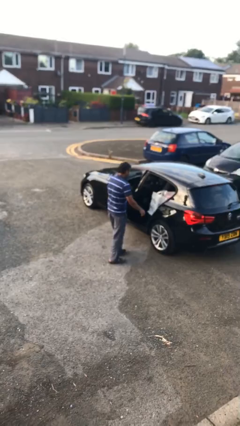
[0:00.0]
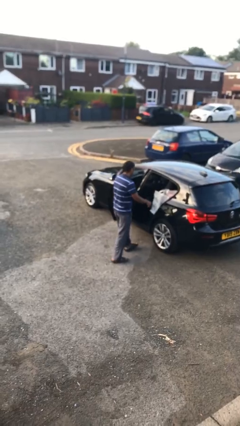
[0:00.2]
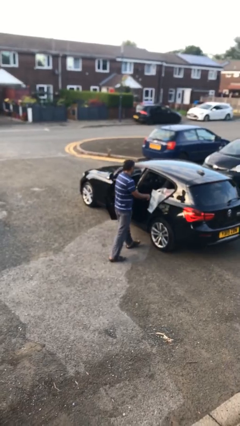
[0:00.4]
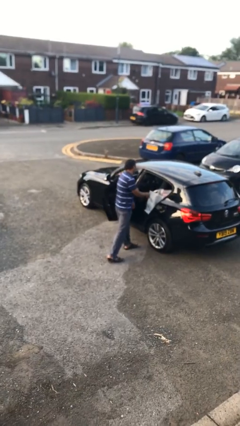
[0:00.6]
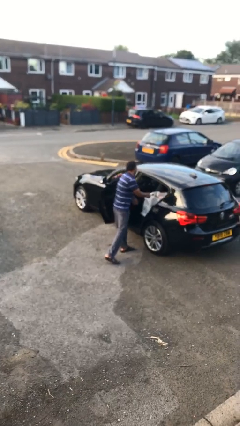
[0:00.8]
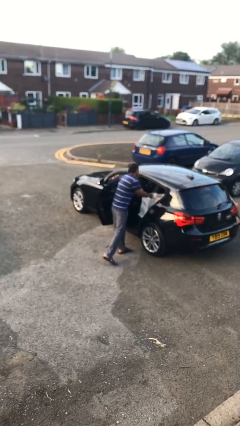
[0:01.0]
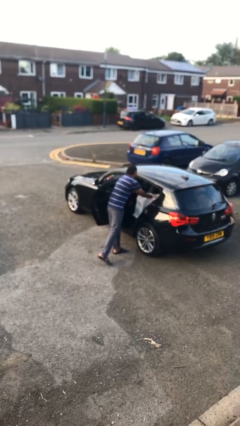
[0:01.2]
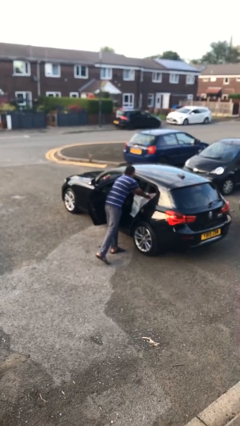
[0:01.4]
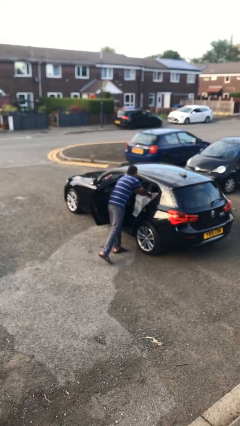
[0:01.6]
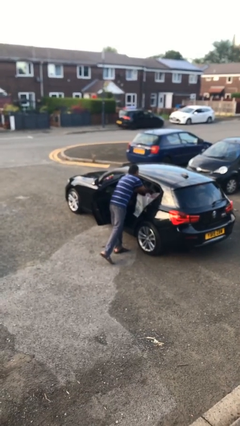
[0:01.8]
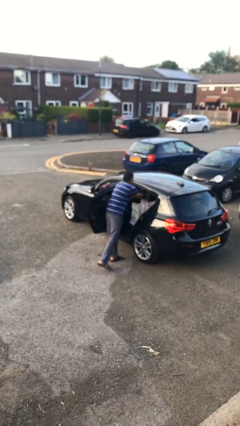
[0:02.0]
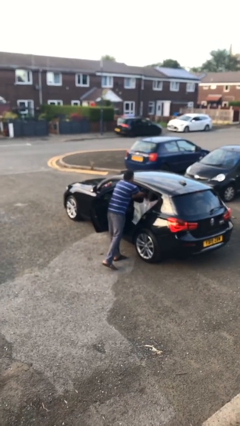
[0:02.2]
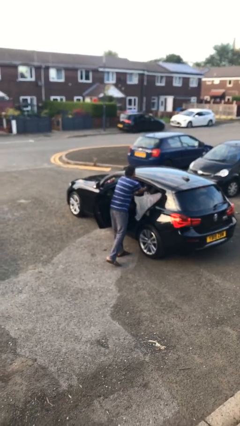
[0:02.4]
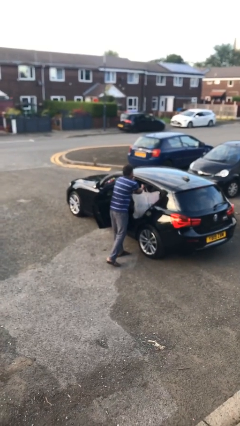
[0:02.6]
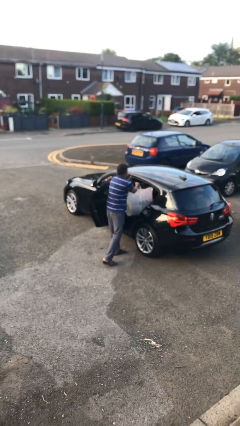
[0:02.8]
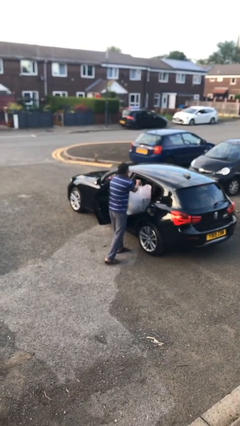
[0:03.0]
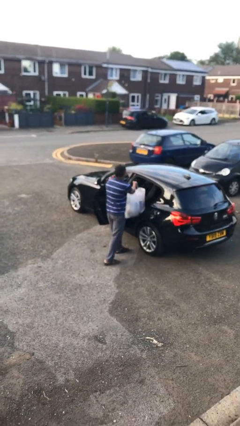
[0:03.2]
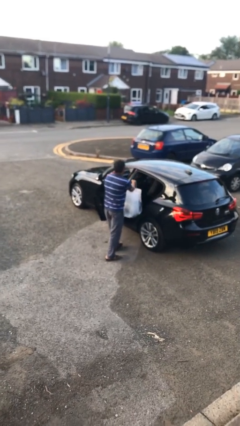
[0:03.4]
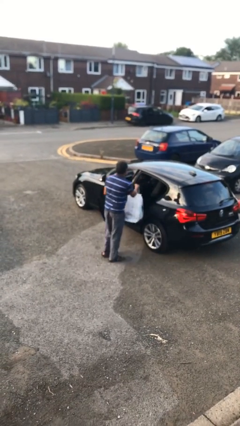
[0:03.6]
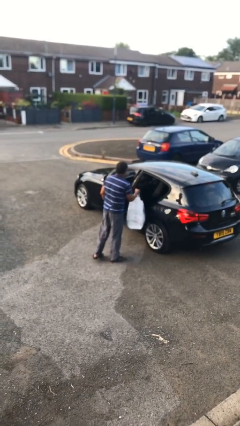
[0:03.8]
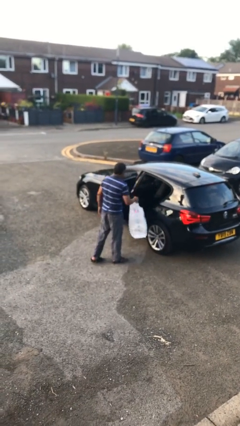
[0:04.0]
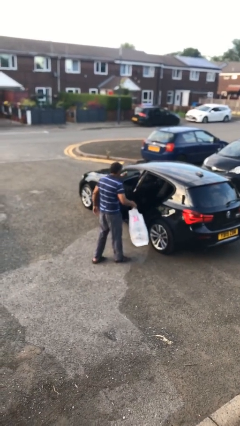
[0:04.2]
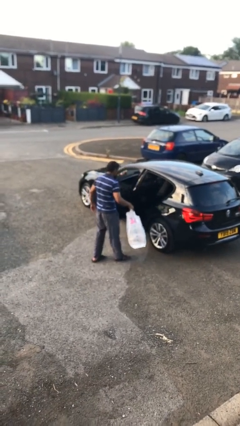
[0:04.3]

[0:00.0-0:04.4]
person unloads car

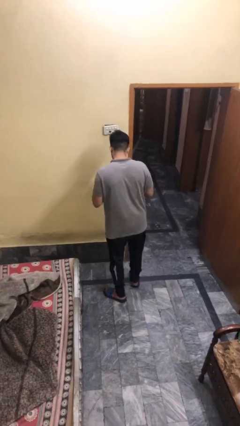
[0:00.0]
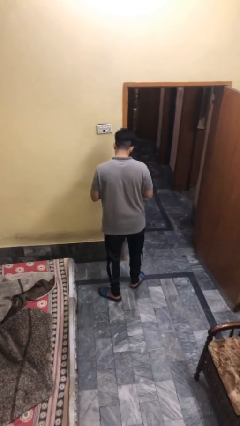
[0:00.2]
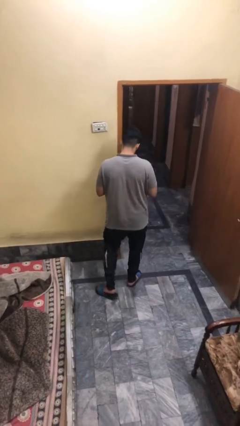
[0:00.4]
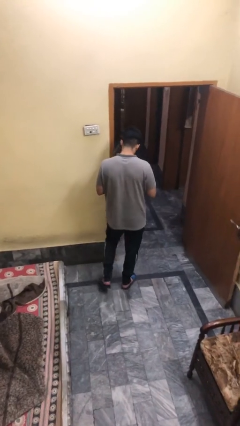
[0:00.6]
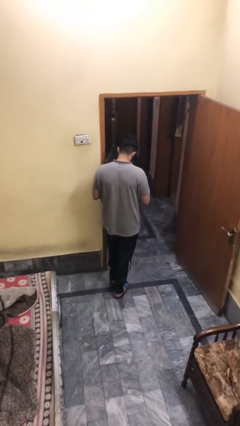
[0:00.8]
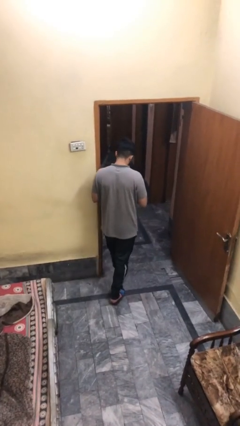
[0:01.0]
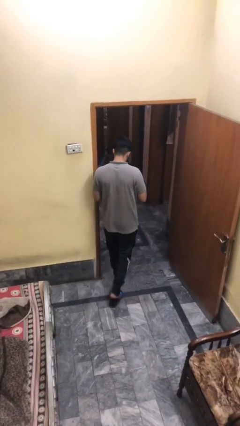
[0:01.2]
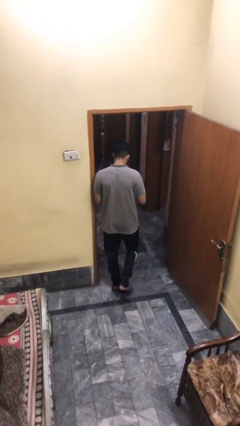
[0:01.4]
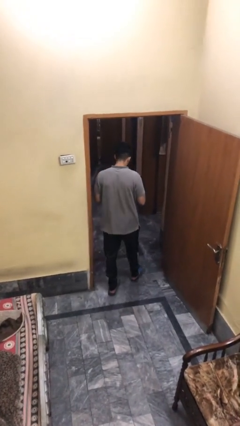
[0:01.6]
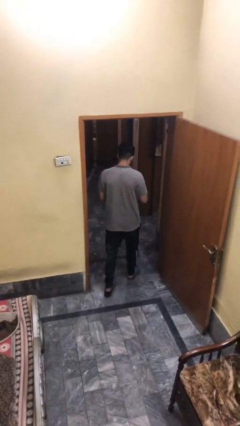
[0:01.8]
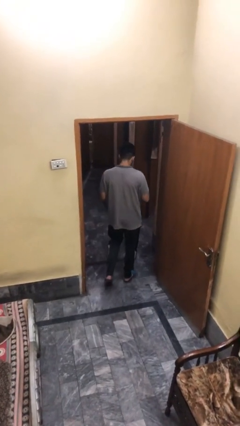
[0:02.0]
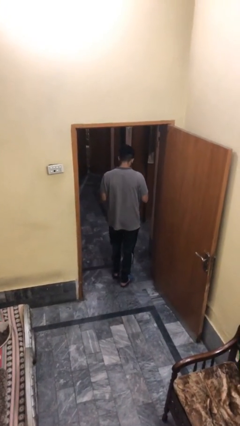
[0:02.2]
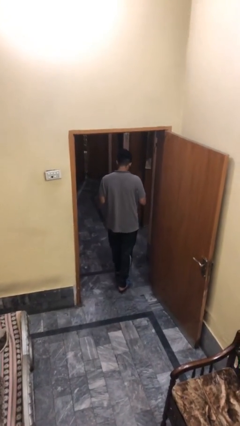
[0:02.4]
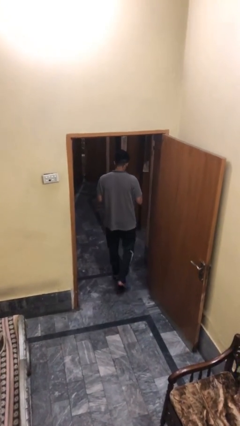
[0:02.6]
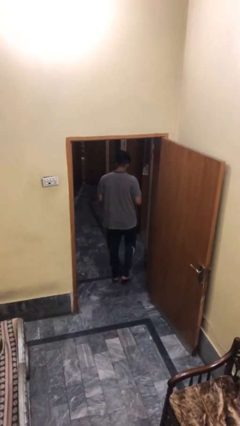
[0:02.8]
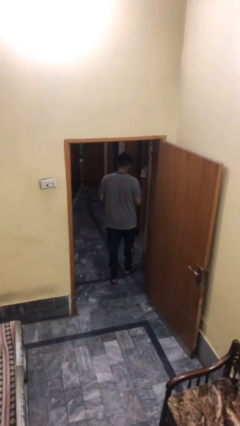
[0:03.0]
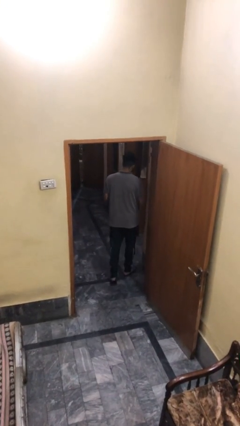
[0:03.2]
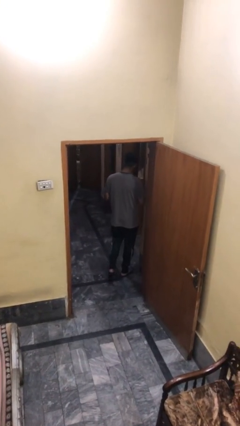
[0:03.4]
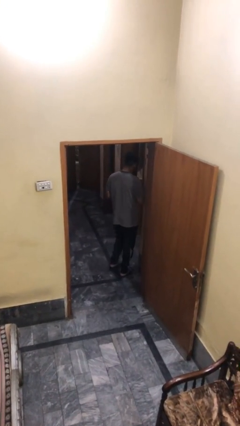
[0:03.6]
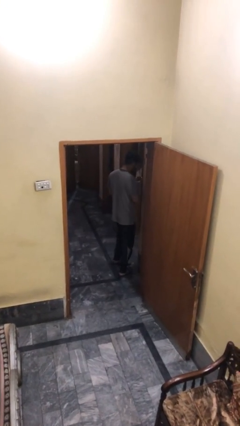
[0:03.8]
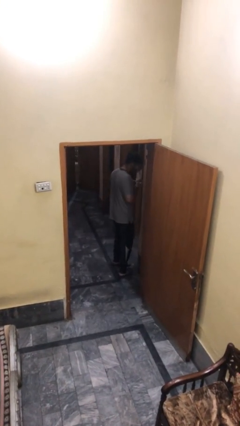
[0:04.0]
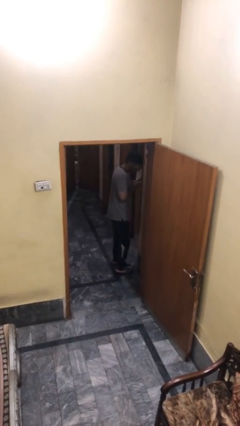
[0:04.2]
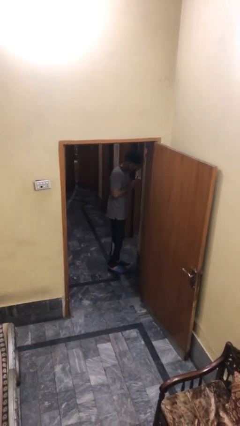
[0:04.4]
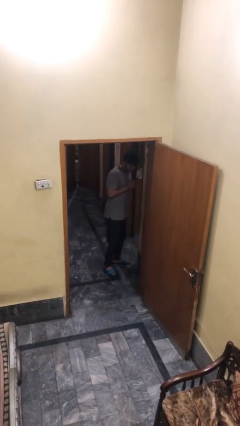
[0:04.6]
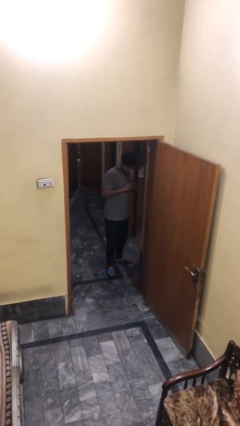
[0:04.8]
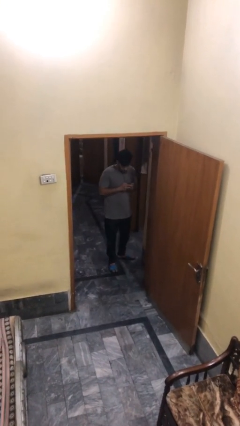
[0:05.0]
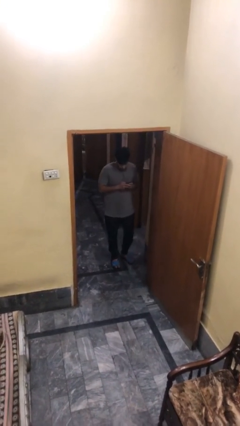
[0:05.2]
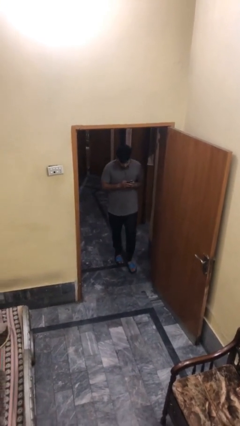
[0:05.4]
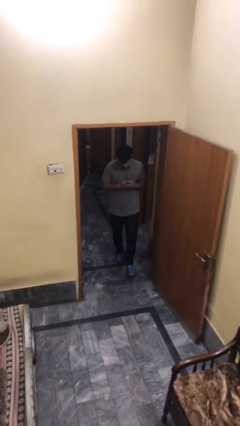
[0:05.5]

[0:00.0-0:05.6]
person exits scene through structure

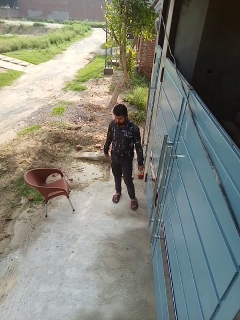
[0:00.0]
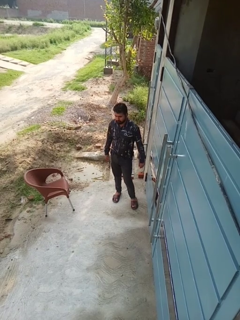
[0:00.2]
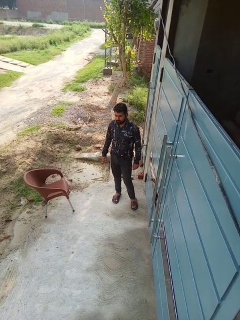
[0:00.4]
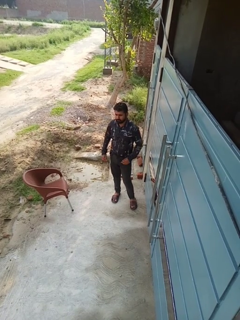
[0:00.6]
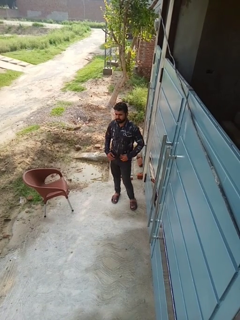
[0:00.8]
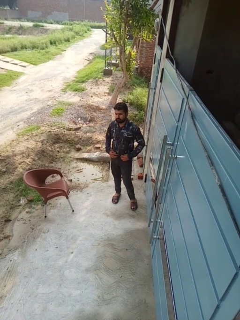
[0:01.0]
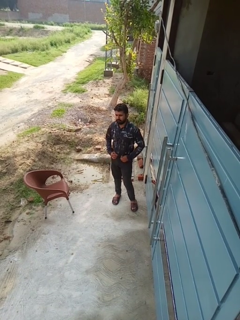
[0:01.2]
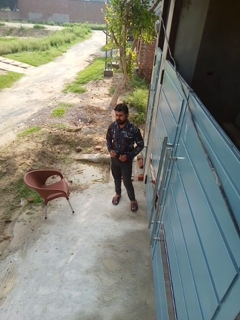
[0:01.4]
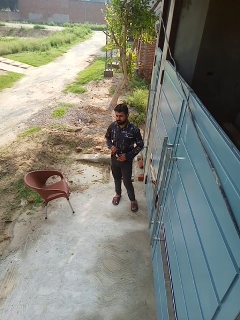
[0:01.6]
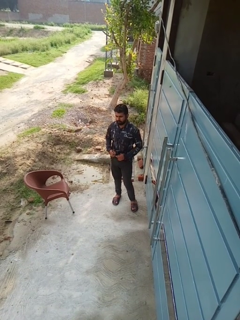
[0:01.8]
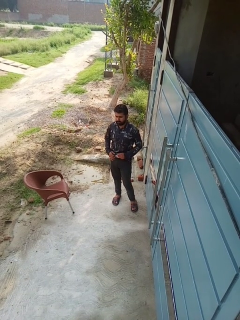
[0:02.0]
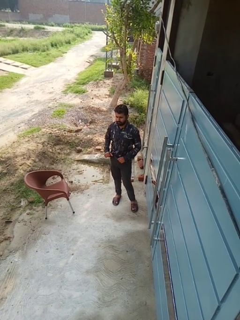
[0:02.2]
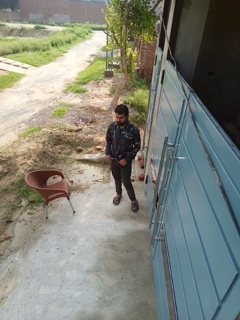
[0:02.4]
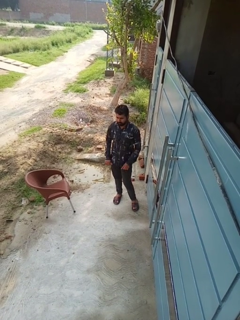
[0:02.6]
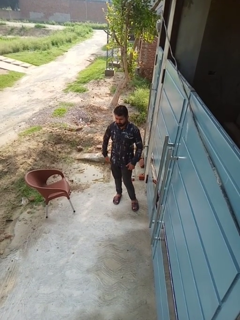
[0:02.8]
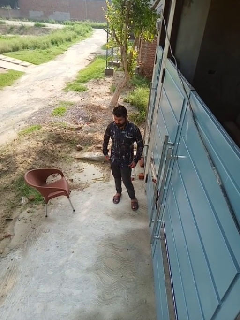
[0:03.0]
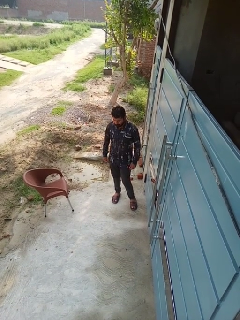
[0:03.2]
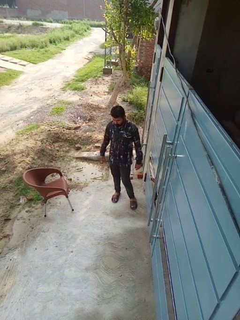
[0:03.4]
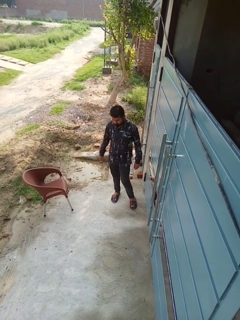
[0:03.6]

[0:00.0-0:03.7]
person untucks shirt

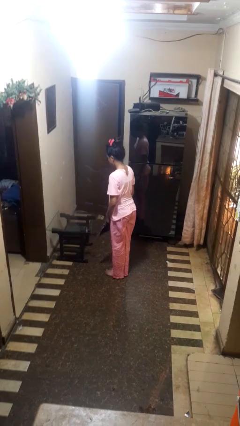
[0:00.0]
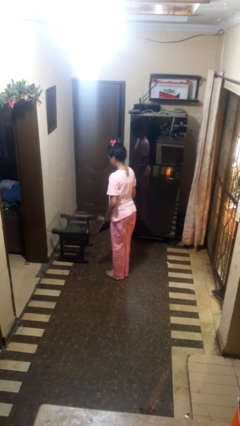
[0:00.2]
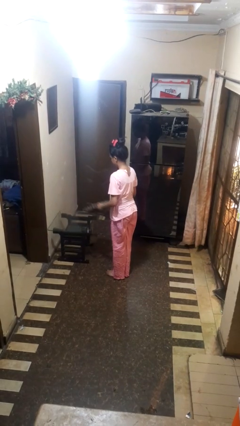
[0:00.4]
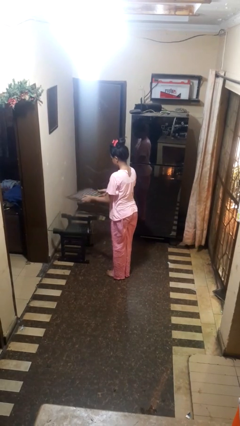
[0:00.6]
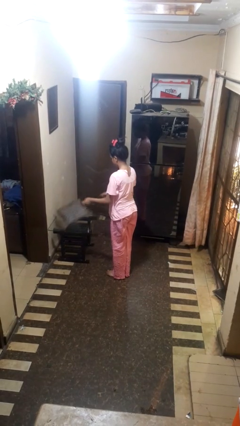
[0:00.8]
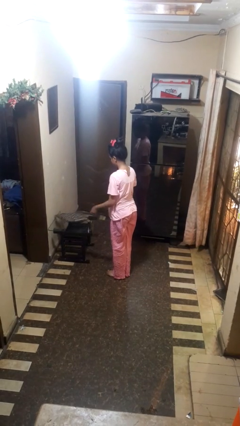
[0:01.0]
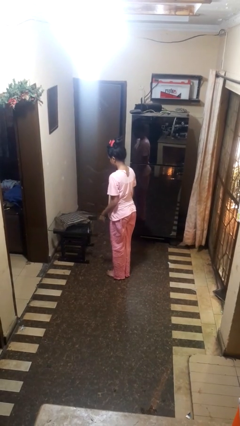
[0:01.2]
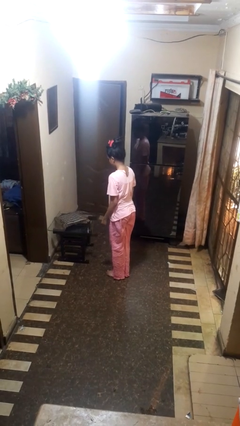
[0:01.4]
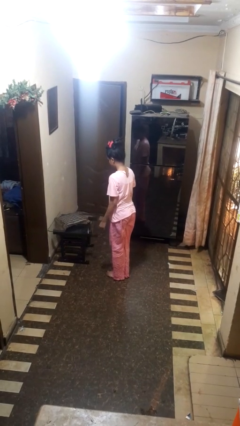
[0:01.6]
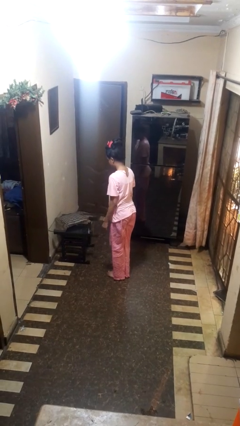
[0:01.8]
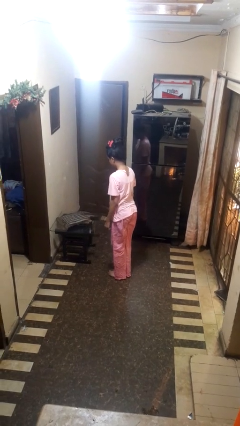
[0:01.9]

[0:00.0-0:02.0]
person throws object on table

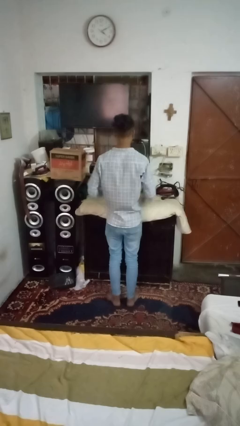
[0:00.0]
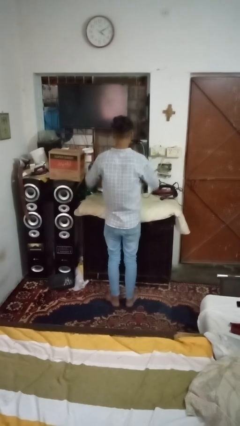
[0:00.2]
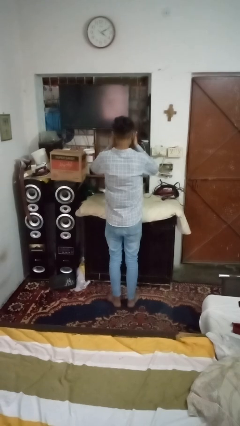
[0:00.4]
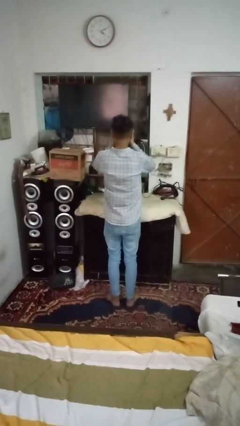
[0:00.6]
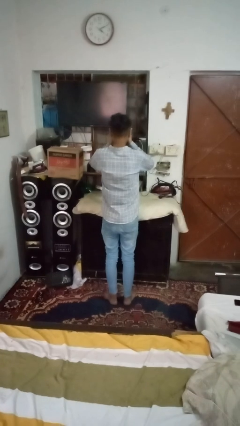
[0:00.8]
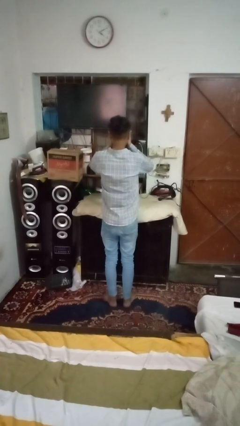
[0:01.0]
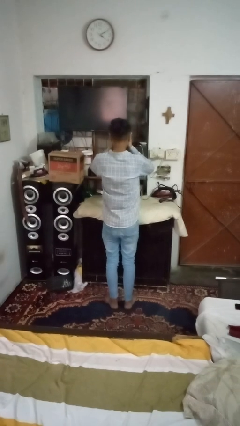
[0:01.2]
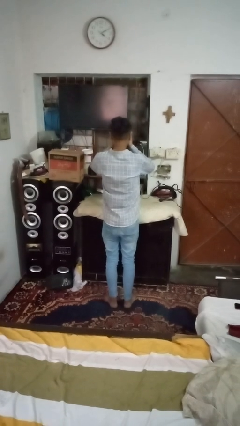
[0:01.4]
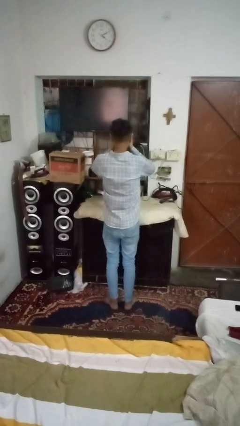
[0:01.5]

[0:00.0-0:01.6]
person covers face with hands

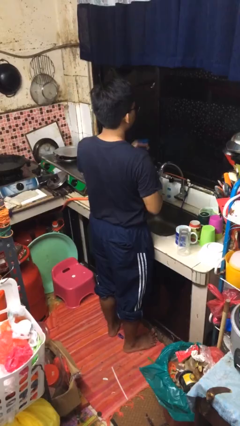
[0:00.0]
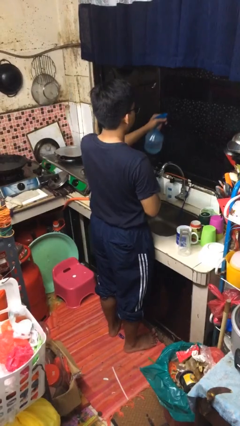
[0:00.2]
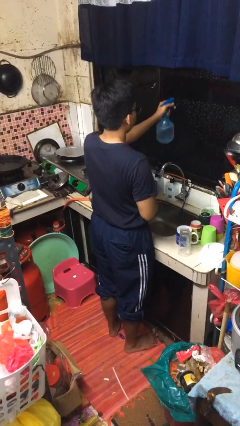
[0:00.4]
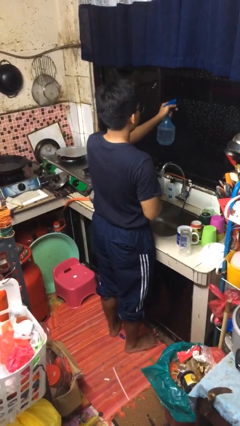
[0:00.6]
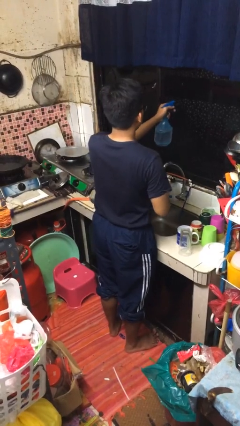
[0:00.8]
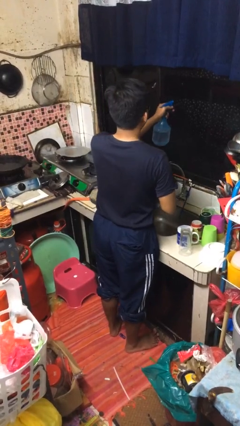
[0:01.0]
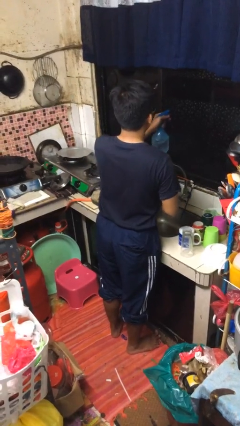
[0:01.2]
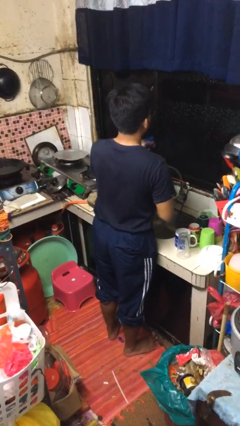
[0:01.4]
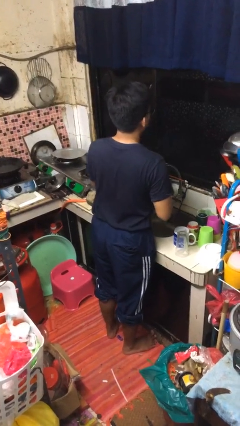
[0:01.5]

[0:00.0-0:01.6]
person sprays from bottle
